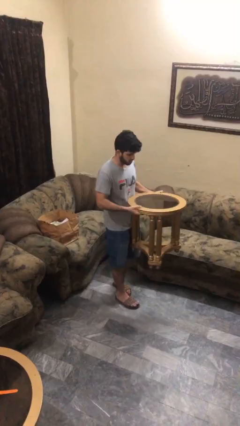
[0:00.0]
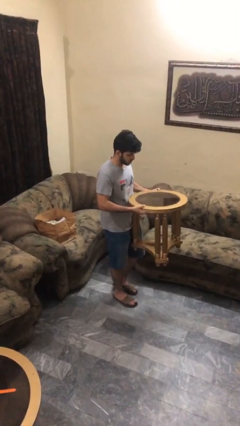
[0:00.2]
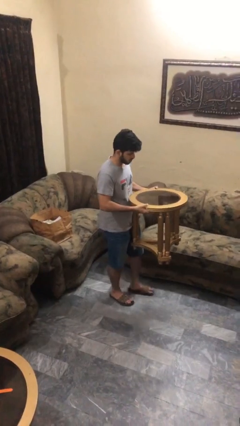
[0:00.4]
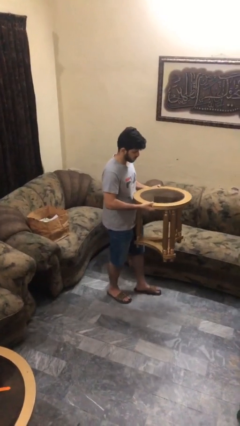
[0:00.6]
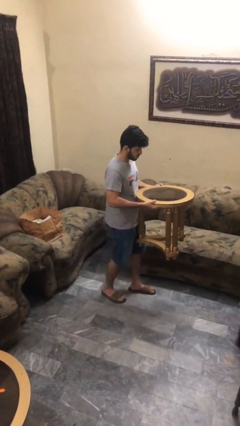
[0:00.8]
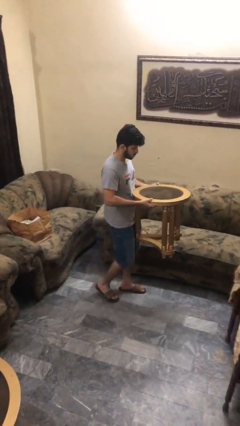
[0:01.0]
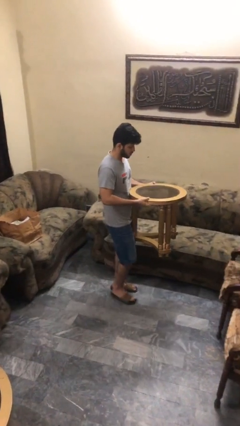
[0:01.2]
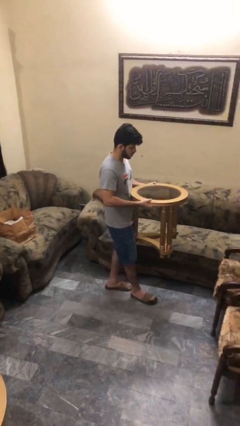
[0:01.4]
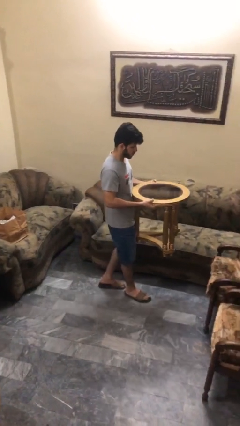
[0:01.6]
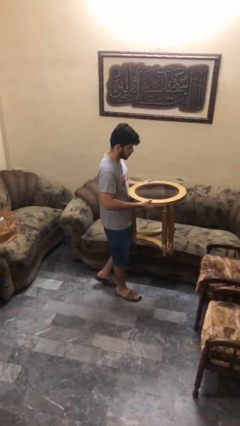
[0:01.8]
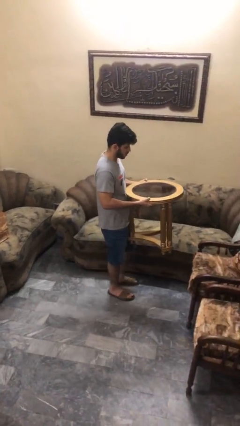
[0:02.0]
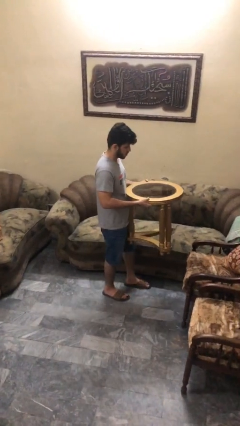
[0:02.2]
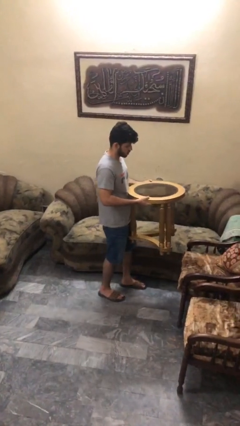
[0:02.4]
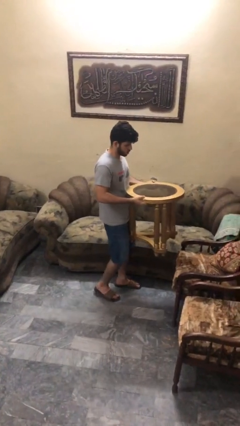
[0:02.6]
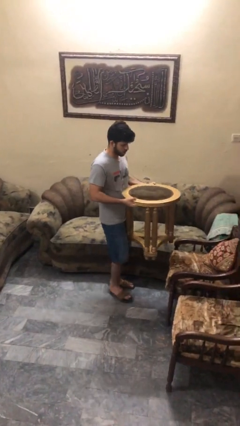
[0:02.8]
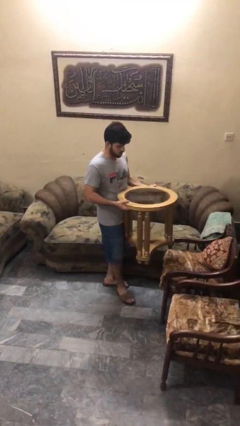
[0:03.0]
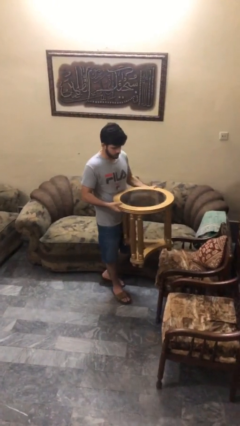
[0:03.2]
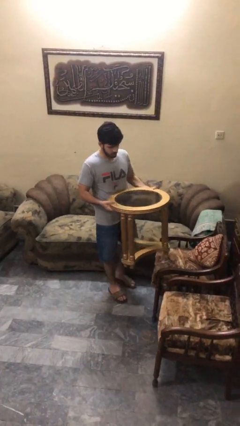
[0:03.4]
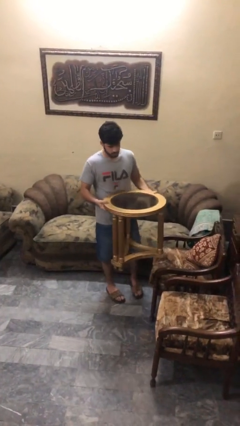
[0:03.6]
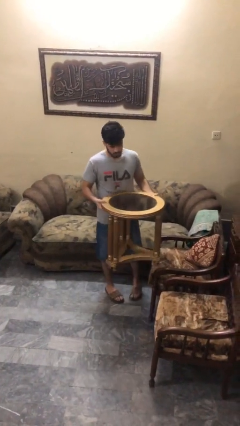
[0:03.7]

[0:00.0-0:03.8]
person carries furniture

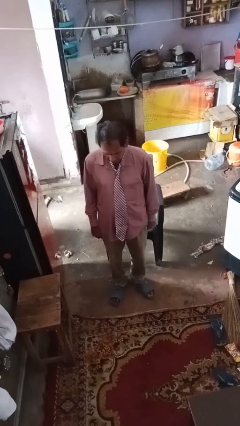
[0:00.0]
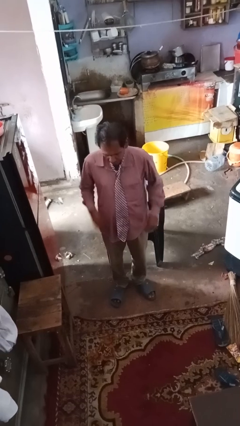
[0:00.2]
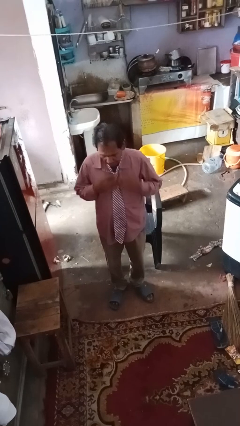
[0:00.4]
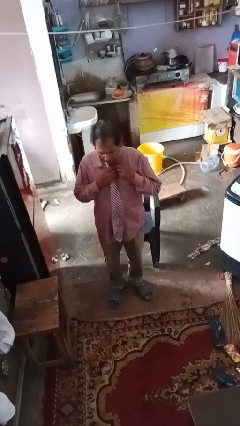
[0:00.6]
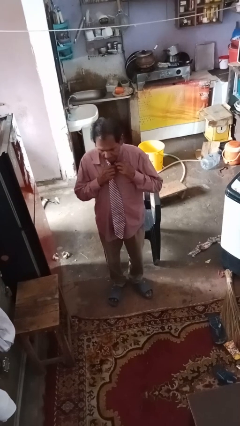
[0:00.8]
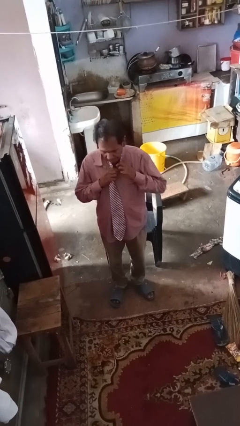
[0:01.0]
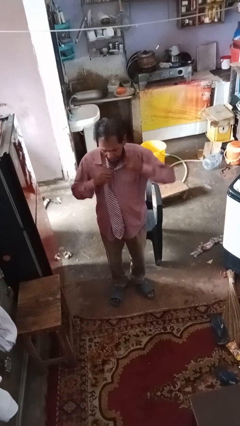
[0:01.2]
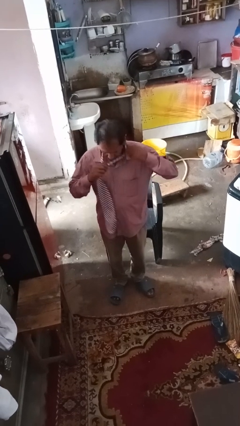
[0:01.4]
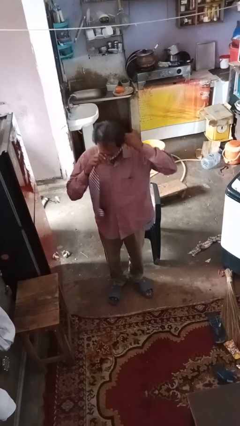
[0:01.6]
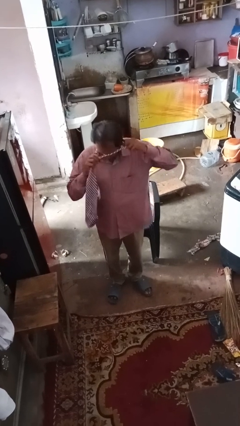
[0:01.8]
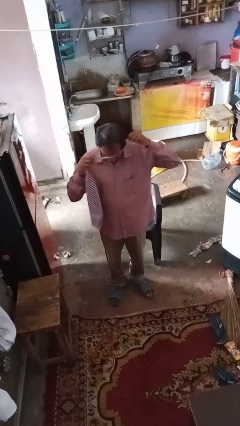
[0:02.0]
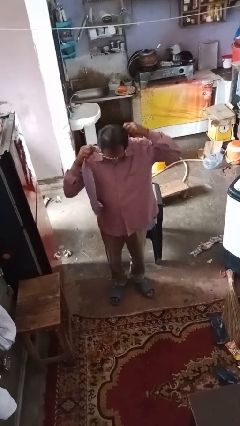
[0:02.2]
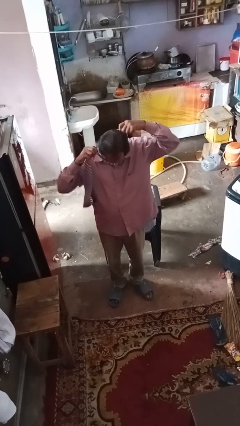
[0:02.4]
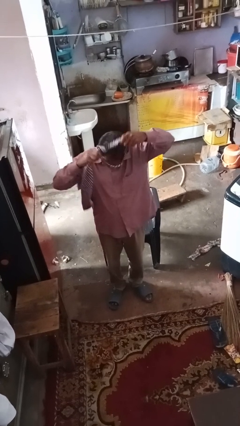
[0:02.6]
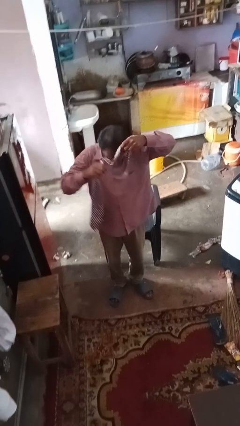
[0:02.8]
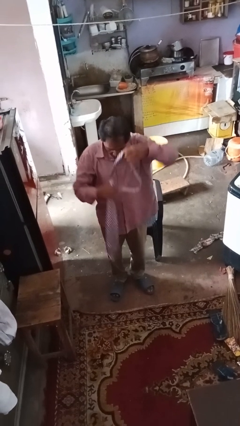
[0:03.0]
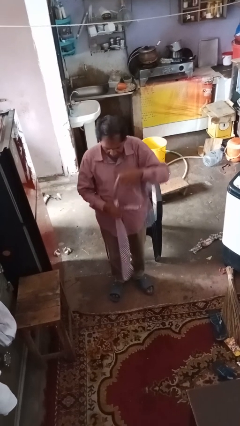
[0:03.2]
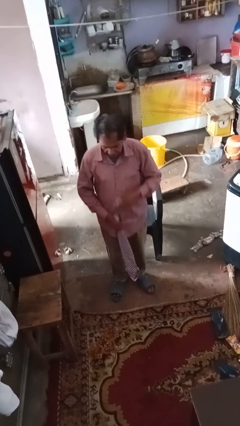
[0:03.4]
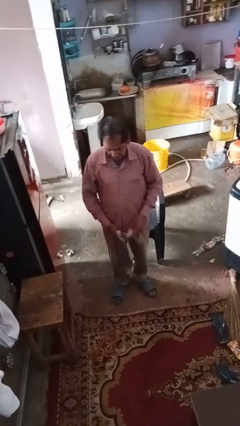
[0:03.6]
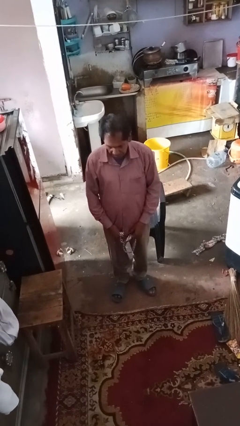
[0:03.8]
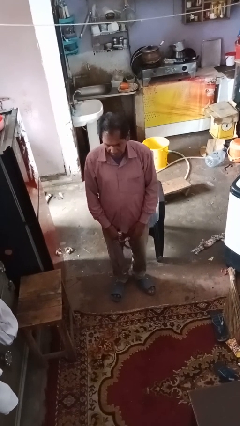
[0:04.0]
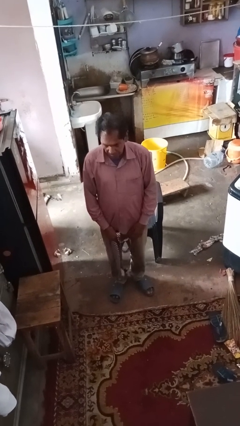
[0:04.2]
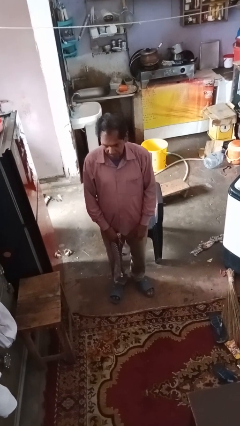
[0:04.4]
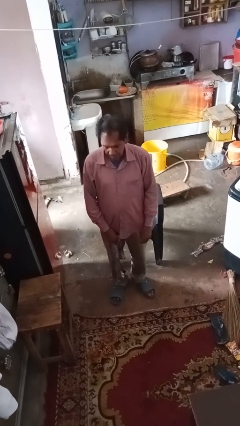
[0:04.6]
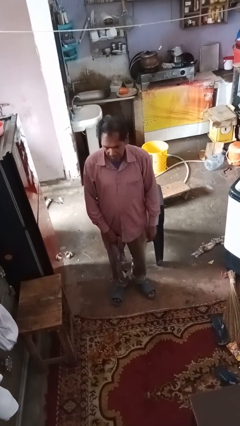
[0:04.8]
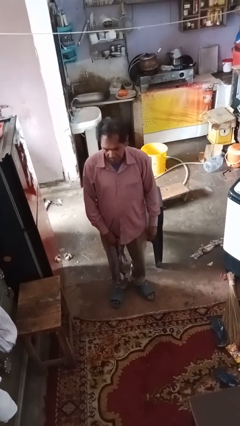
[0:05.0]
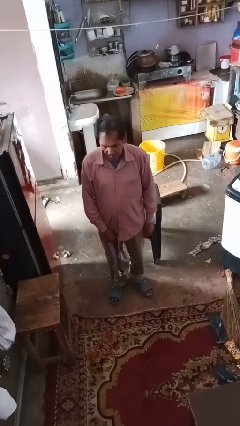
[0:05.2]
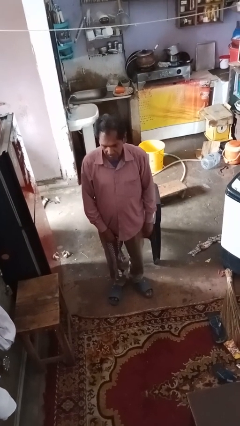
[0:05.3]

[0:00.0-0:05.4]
person takes off necktie

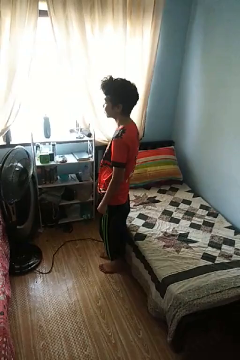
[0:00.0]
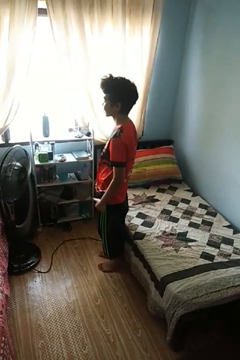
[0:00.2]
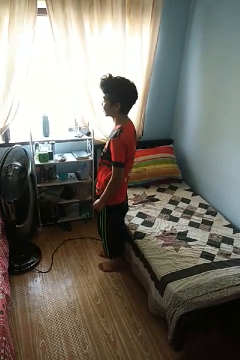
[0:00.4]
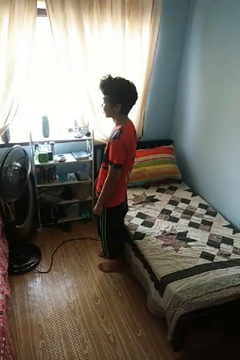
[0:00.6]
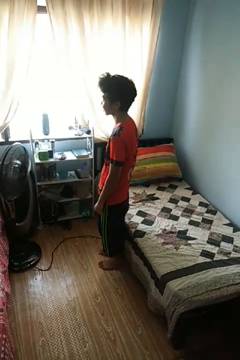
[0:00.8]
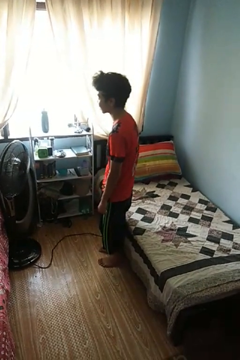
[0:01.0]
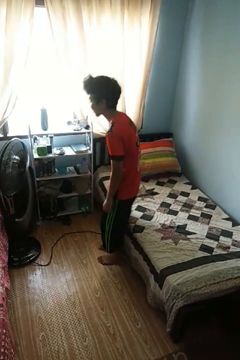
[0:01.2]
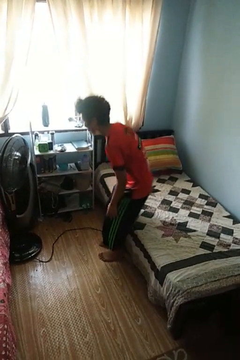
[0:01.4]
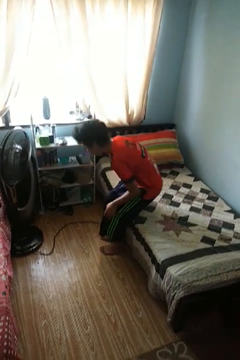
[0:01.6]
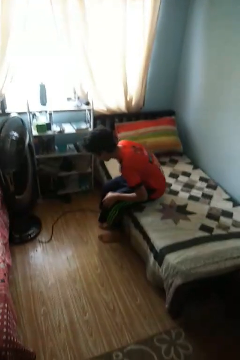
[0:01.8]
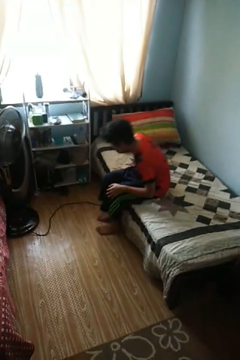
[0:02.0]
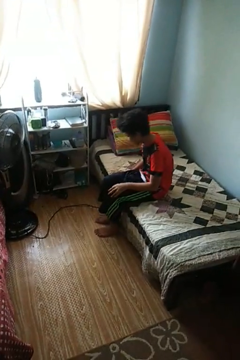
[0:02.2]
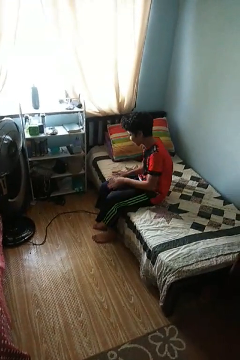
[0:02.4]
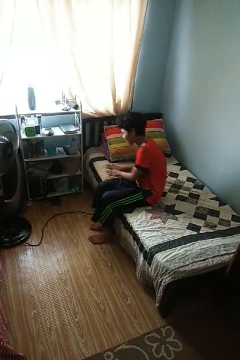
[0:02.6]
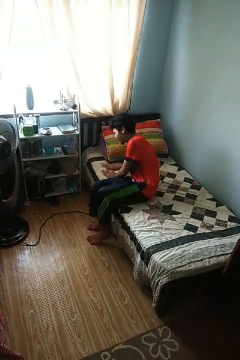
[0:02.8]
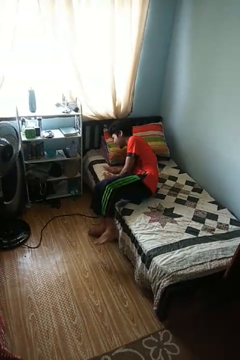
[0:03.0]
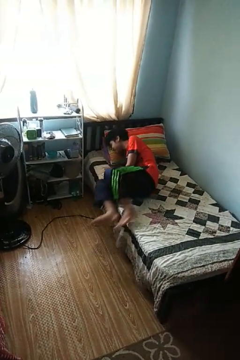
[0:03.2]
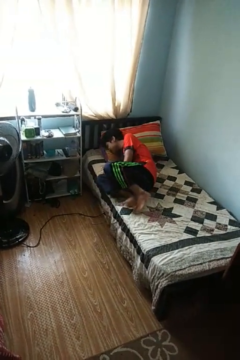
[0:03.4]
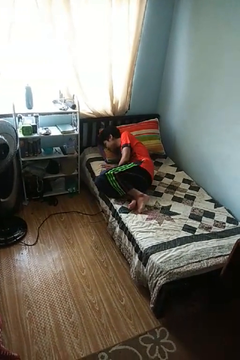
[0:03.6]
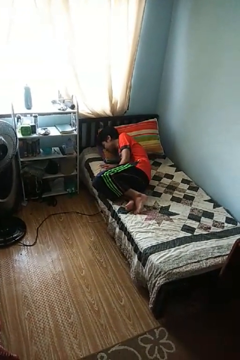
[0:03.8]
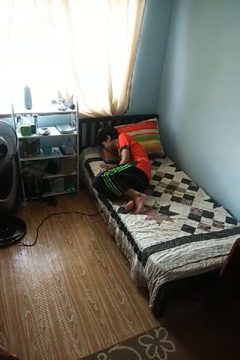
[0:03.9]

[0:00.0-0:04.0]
person lies down on bed

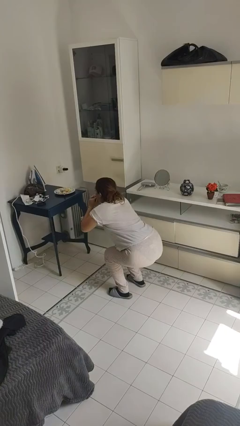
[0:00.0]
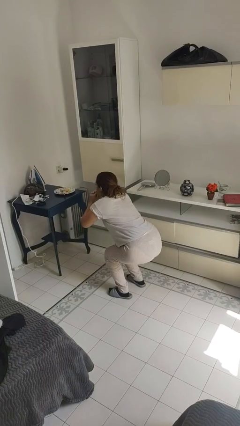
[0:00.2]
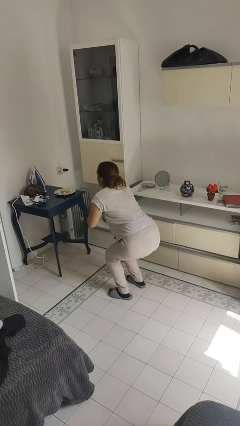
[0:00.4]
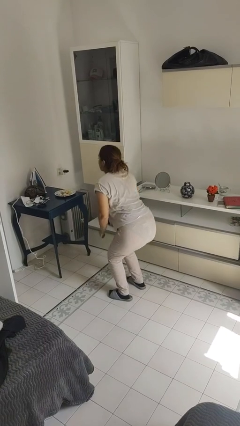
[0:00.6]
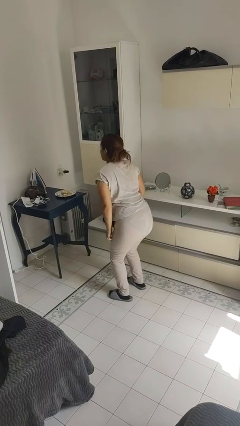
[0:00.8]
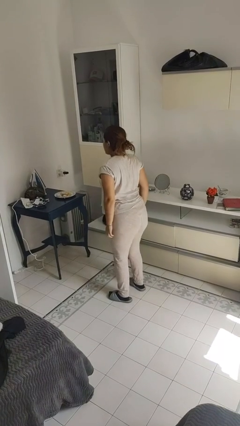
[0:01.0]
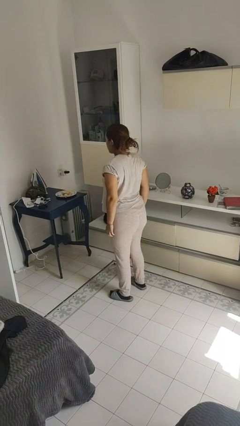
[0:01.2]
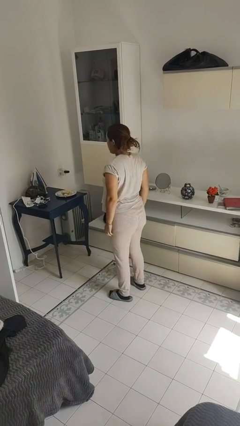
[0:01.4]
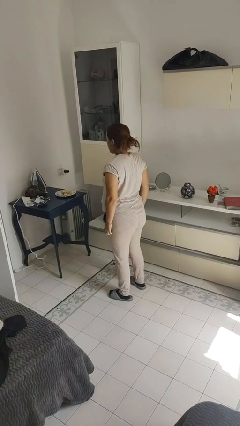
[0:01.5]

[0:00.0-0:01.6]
person stands up

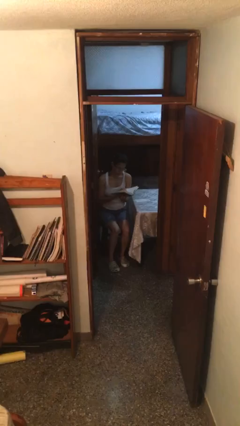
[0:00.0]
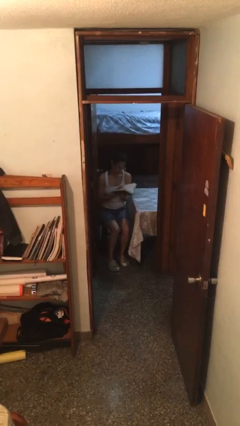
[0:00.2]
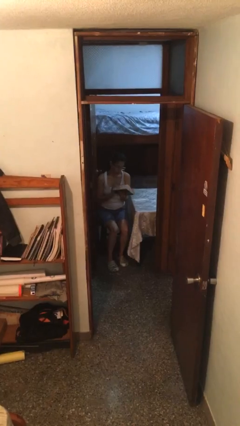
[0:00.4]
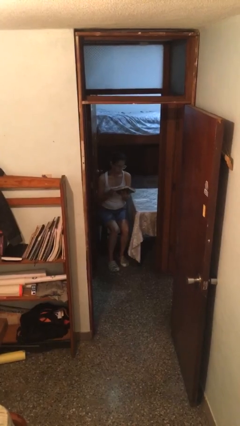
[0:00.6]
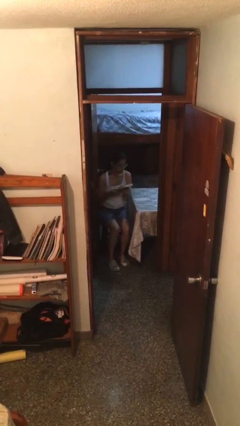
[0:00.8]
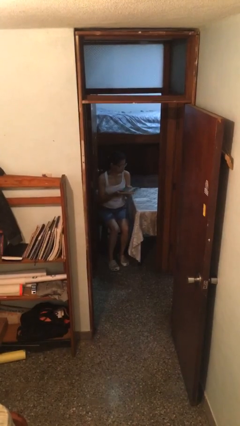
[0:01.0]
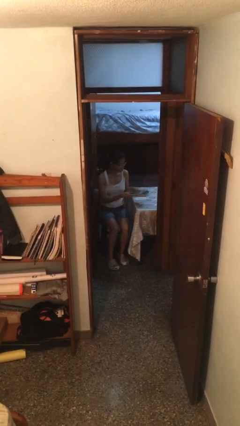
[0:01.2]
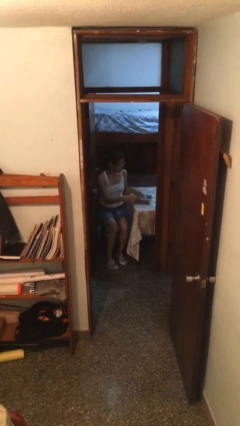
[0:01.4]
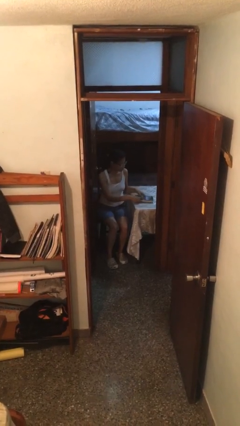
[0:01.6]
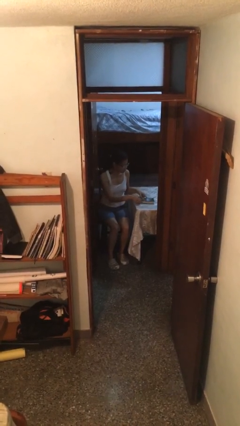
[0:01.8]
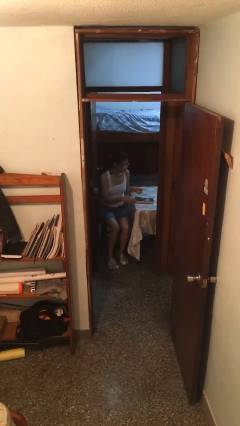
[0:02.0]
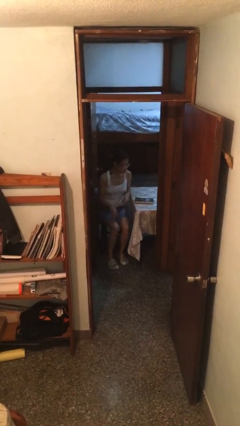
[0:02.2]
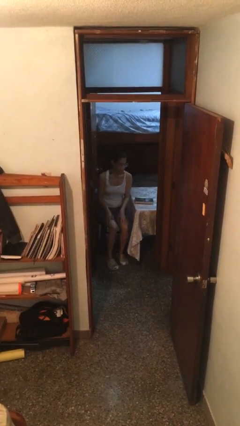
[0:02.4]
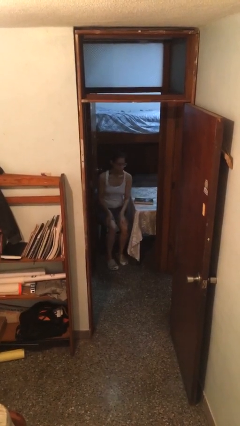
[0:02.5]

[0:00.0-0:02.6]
person puts down object on table

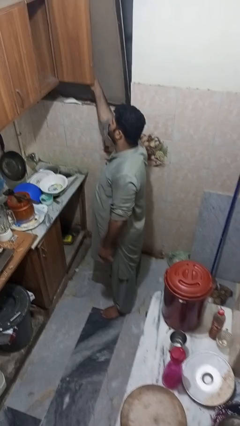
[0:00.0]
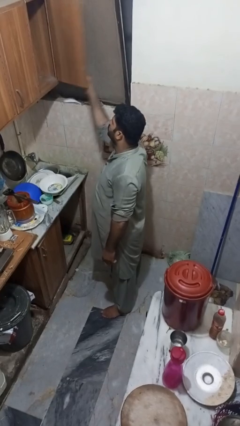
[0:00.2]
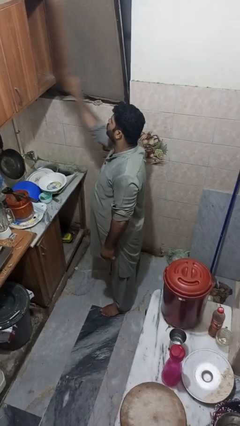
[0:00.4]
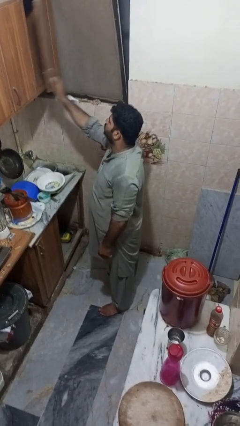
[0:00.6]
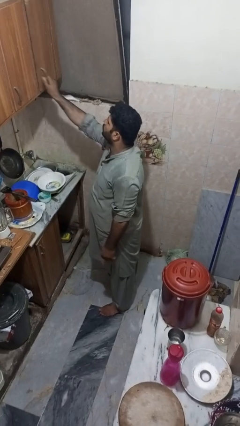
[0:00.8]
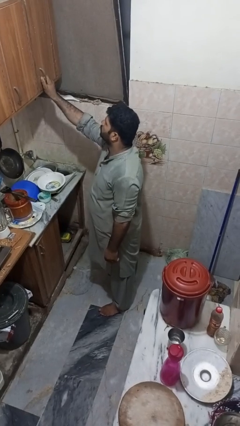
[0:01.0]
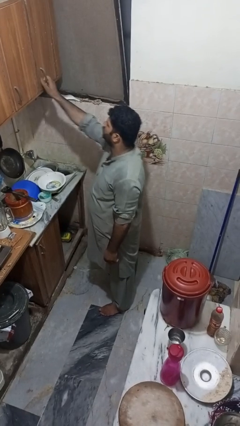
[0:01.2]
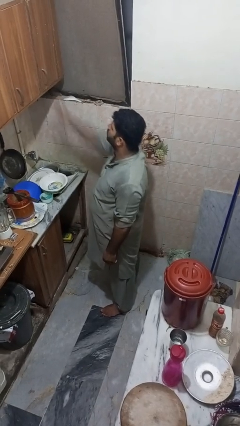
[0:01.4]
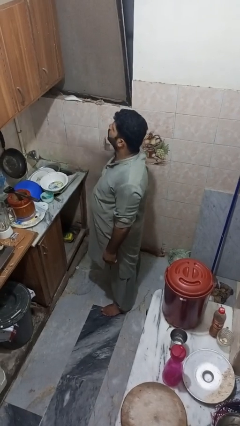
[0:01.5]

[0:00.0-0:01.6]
person closes cabinet
